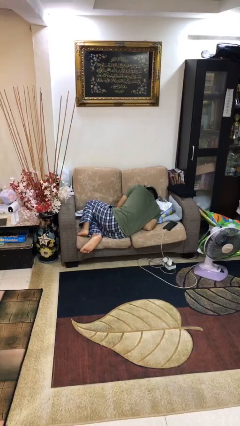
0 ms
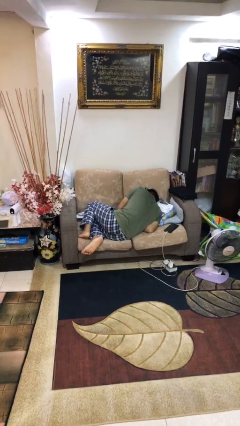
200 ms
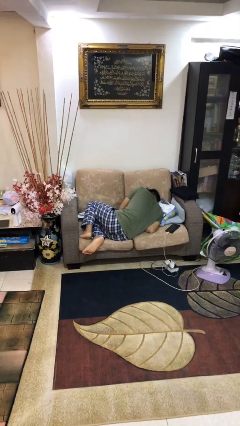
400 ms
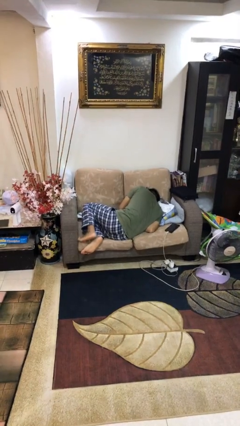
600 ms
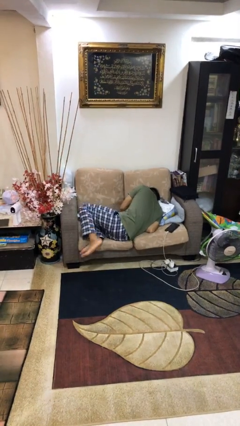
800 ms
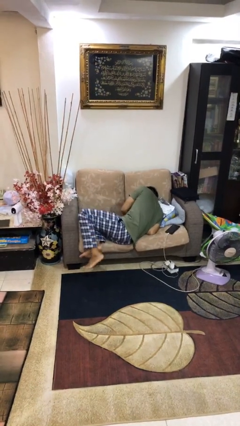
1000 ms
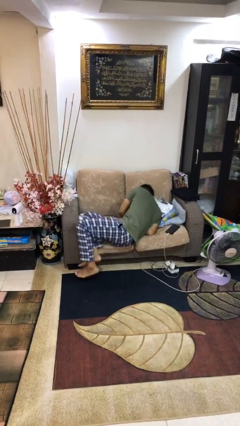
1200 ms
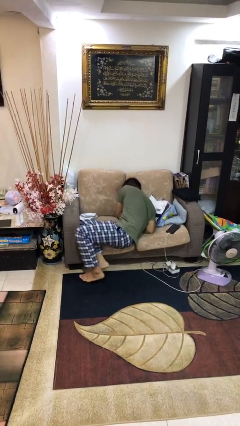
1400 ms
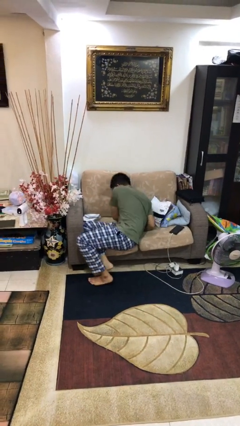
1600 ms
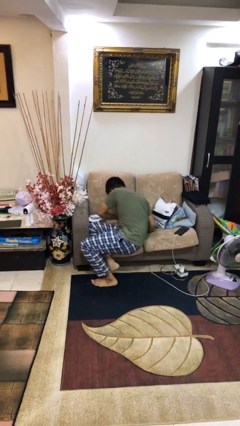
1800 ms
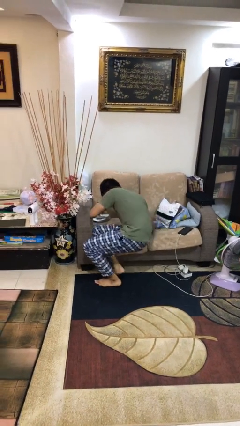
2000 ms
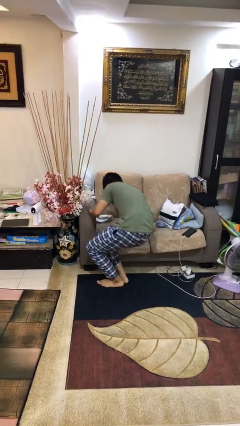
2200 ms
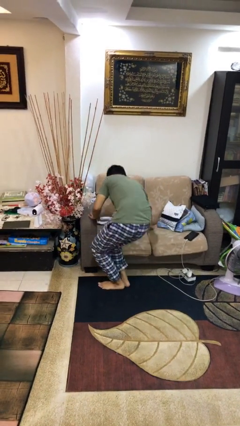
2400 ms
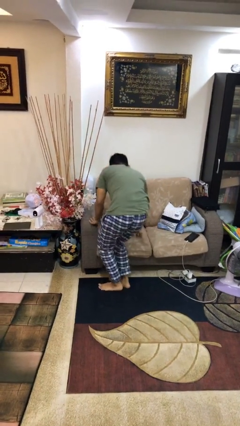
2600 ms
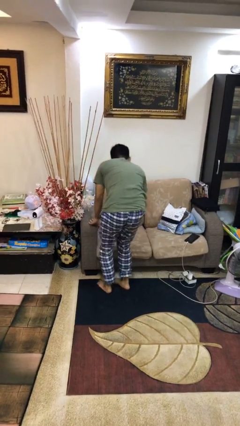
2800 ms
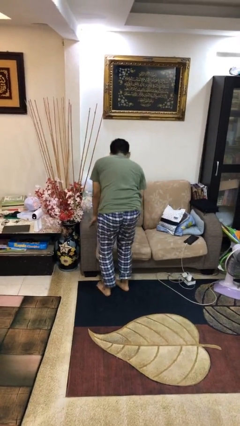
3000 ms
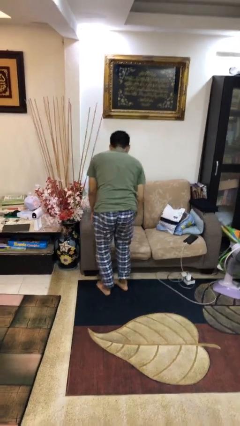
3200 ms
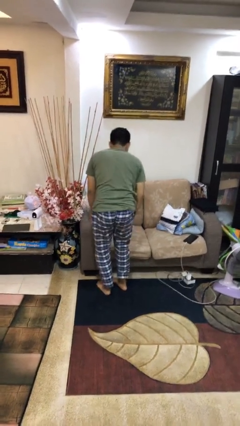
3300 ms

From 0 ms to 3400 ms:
person stands up

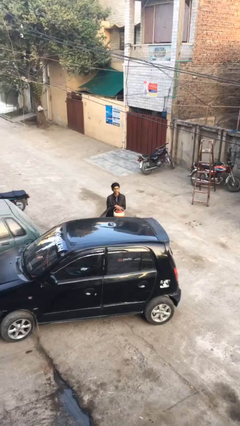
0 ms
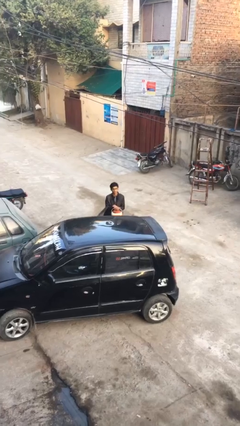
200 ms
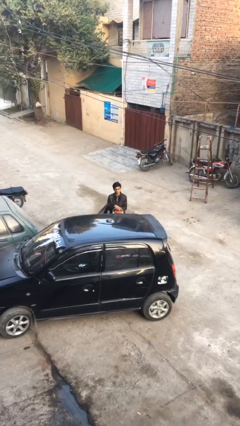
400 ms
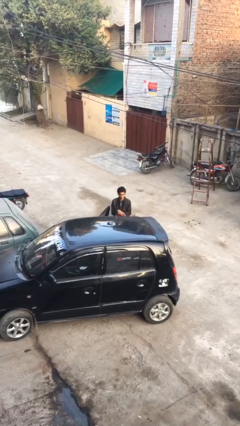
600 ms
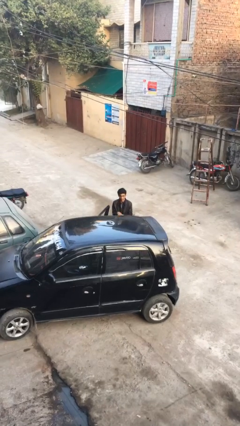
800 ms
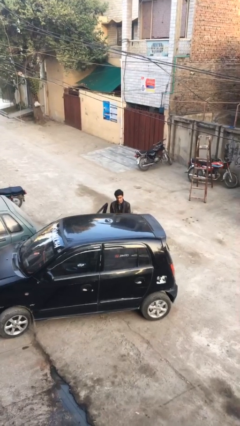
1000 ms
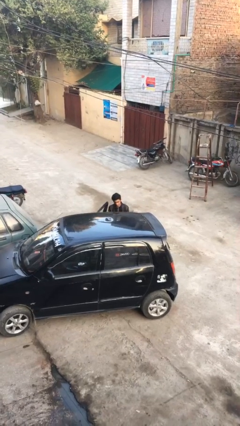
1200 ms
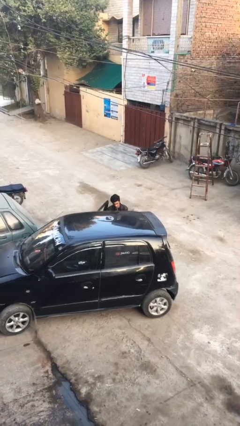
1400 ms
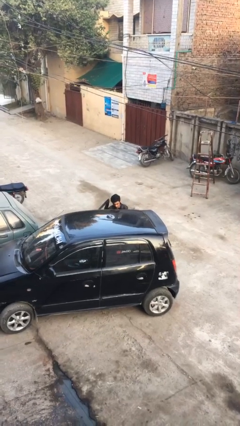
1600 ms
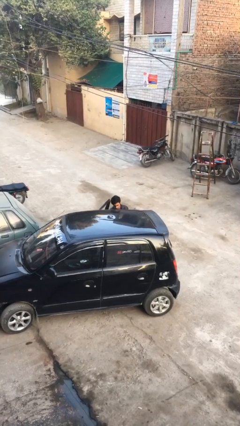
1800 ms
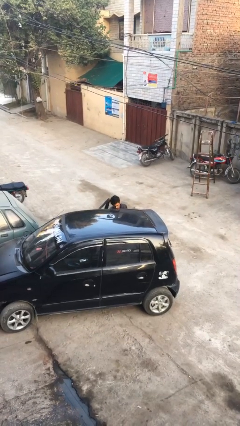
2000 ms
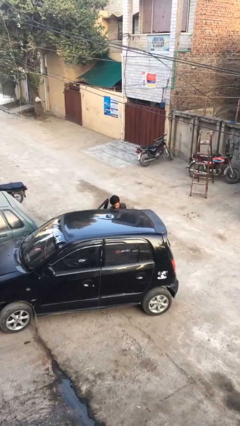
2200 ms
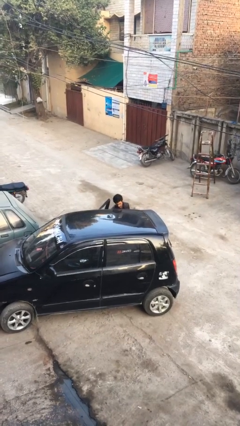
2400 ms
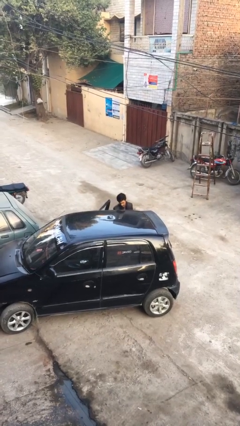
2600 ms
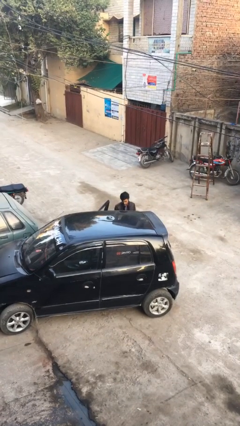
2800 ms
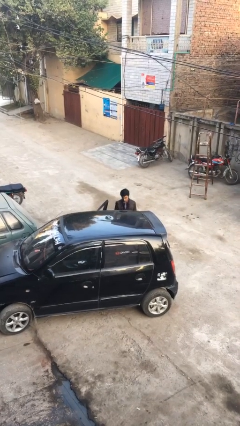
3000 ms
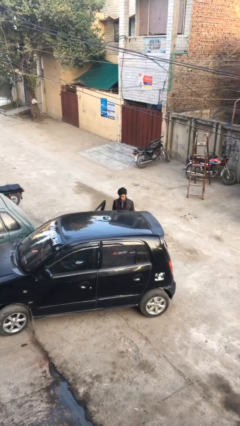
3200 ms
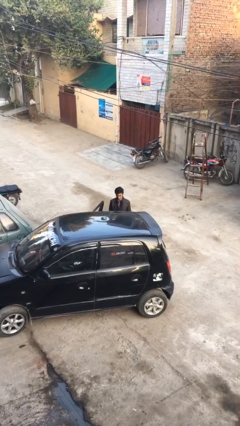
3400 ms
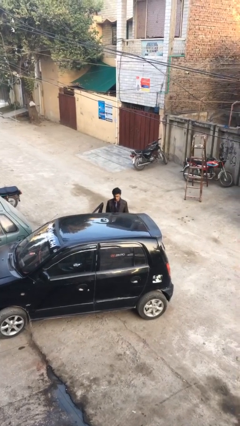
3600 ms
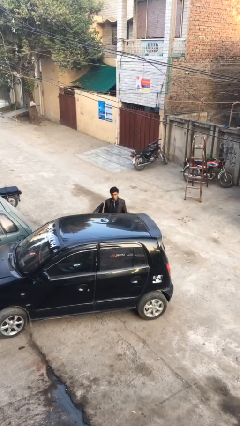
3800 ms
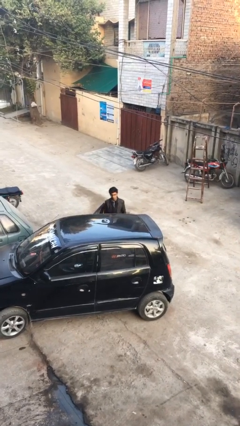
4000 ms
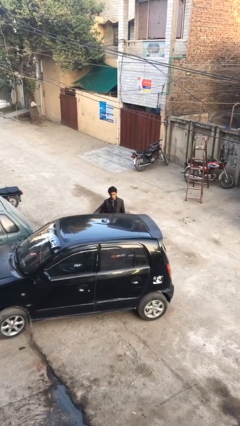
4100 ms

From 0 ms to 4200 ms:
person loads car

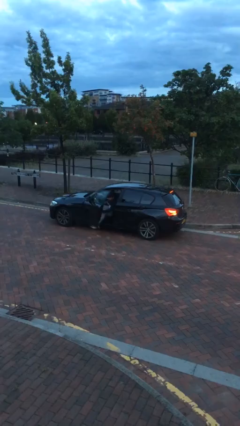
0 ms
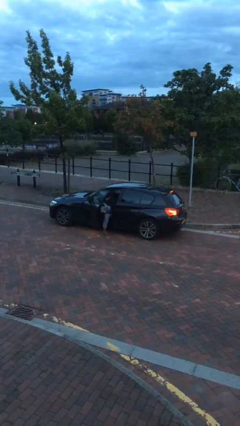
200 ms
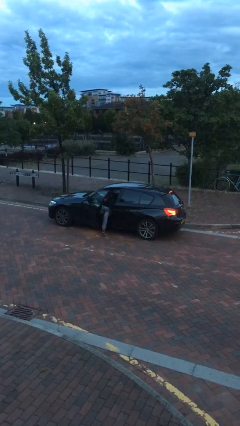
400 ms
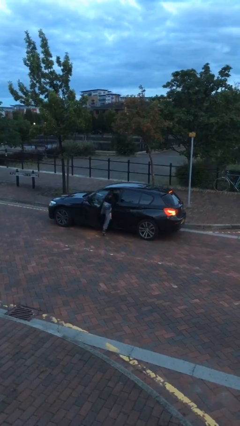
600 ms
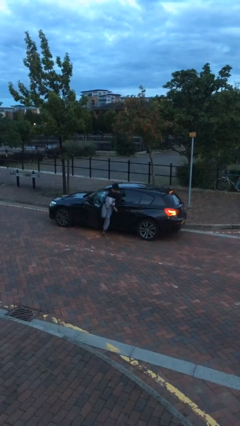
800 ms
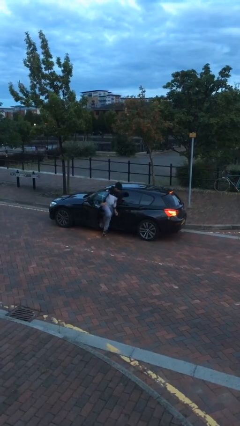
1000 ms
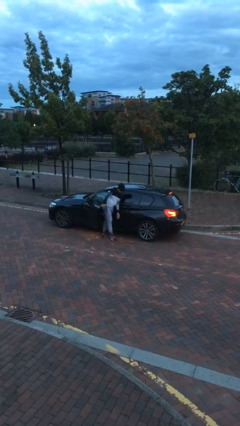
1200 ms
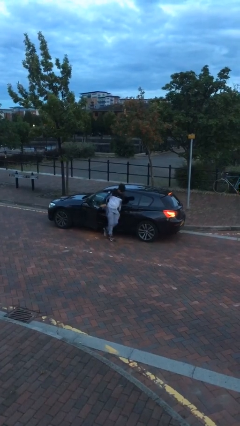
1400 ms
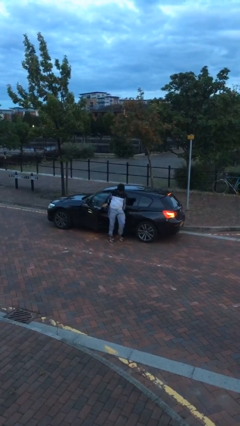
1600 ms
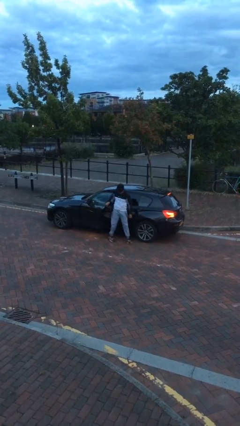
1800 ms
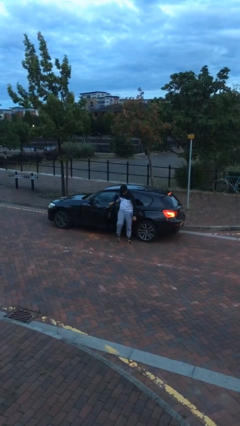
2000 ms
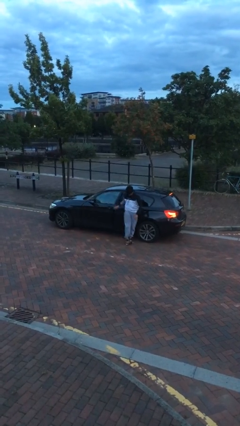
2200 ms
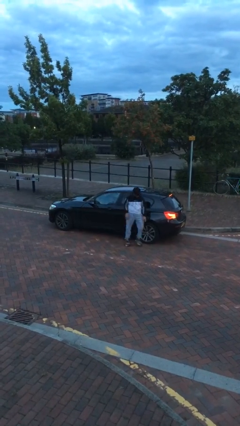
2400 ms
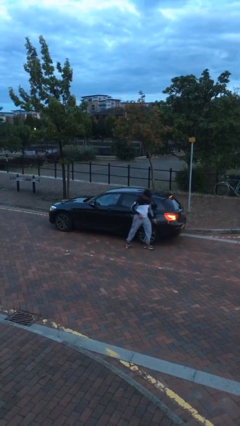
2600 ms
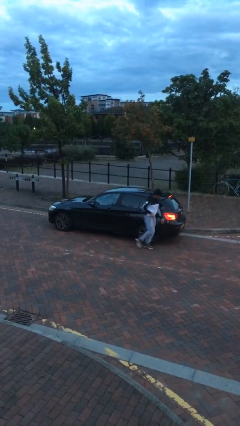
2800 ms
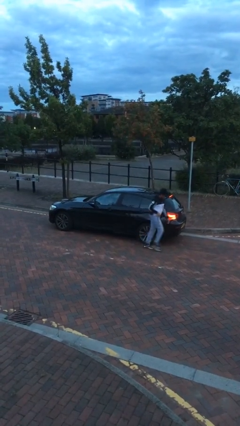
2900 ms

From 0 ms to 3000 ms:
car drops off person

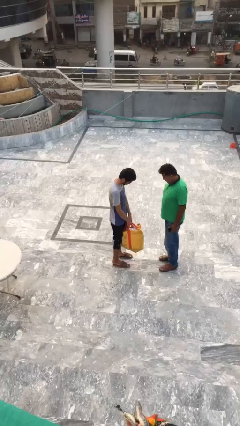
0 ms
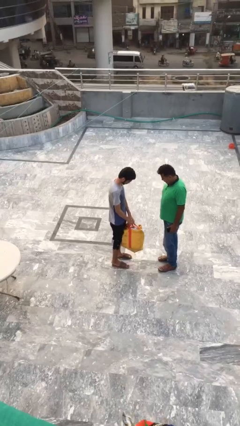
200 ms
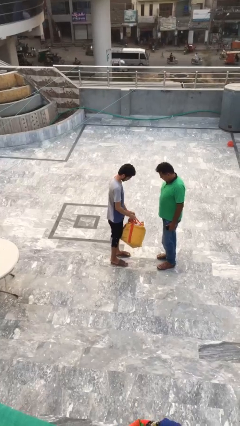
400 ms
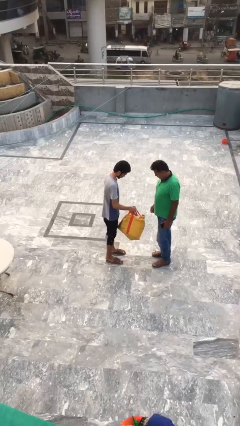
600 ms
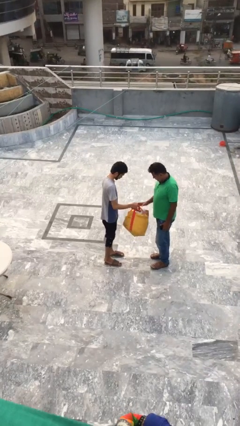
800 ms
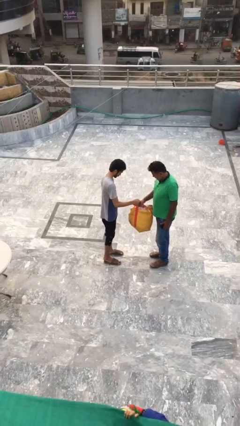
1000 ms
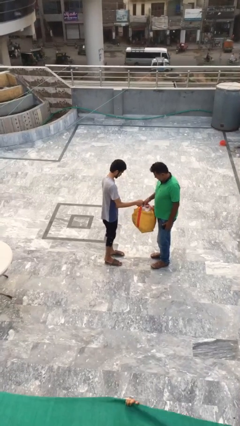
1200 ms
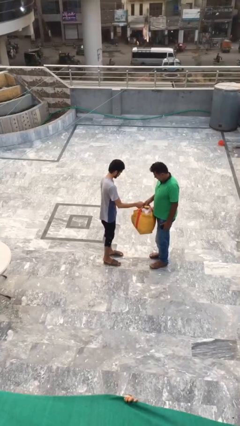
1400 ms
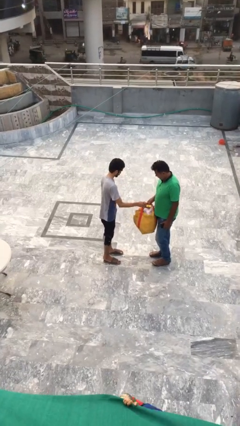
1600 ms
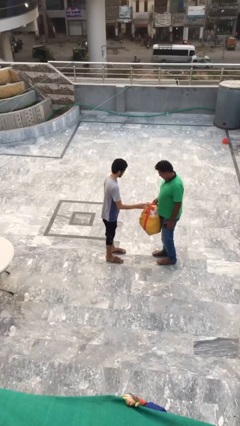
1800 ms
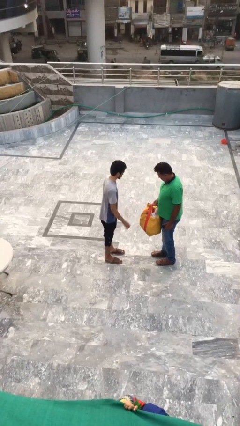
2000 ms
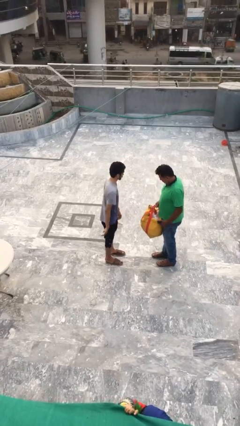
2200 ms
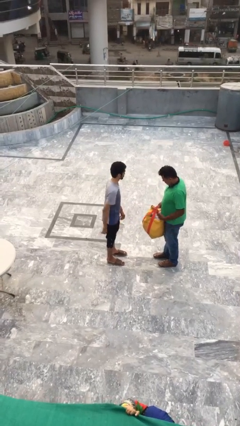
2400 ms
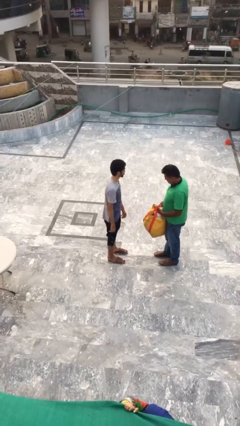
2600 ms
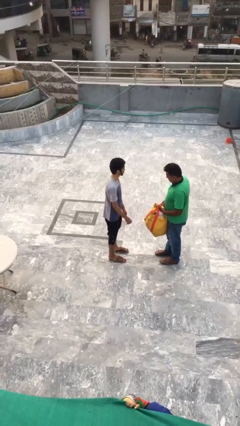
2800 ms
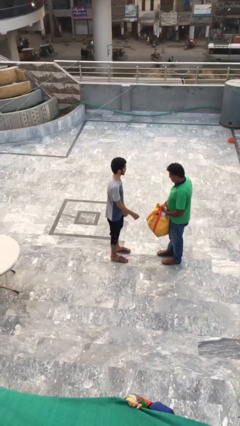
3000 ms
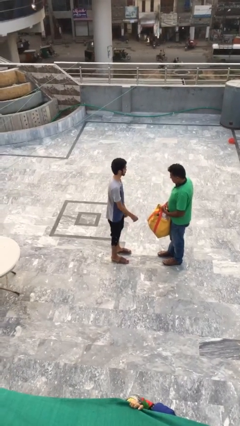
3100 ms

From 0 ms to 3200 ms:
person transfers object to person

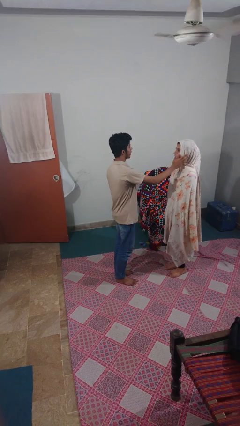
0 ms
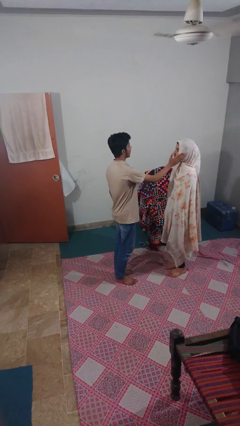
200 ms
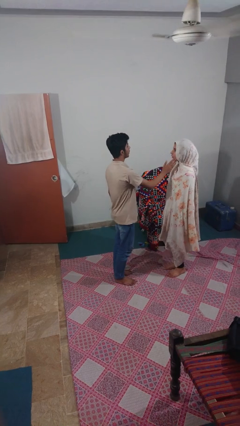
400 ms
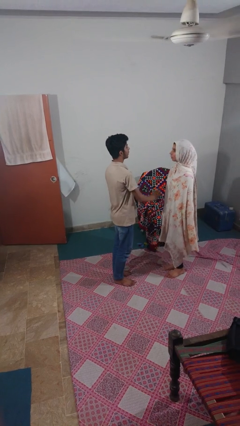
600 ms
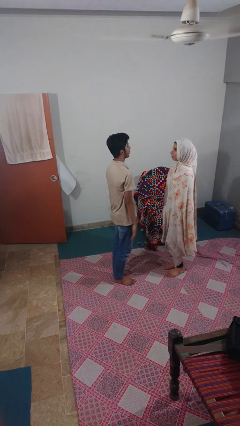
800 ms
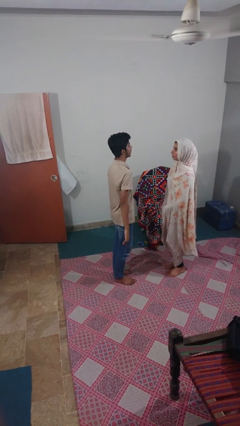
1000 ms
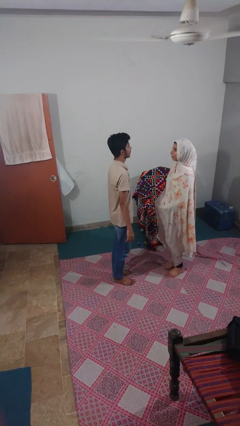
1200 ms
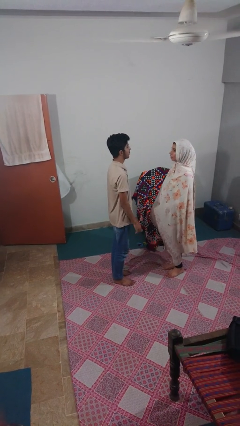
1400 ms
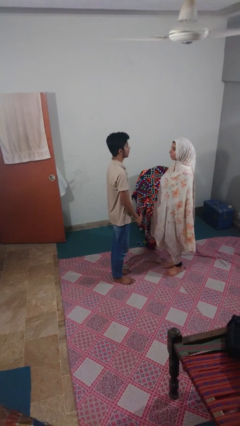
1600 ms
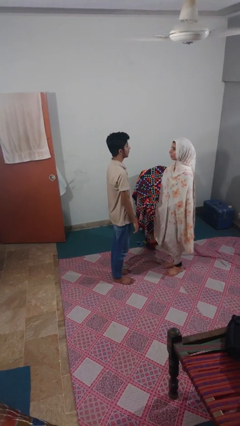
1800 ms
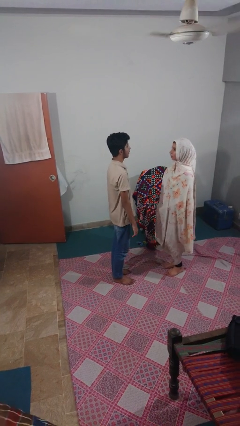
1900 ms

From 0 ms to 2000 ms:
person touches face of person

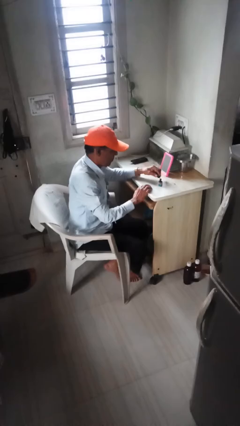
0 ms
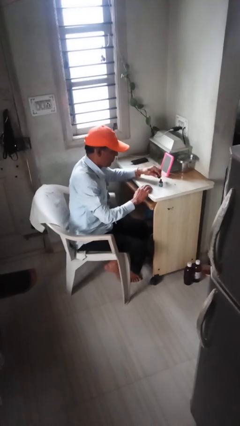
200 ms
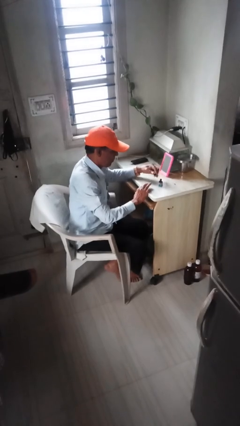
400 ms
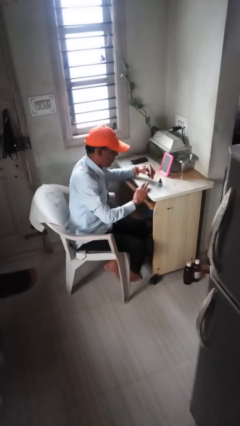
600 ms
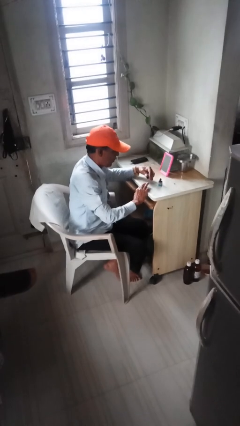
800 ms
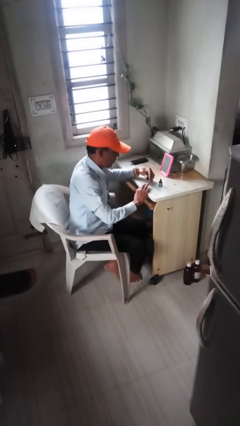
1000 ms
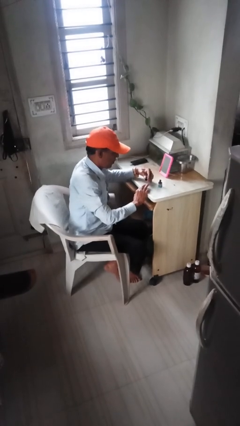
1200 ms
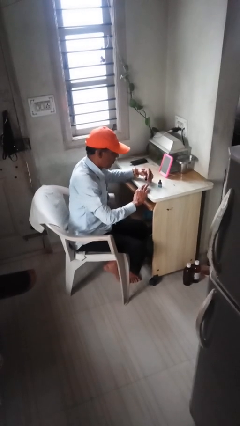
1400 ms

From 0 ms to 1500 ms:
person paints fingernails
